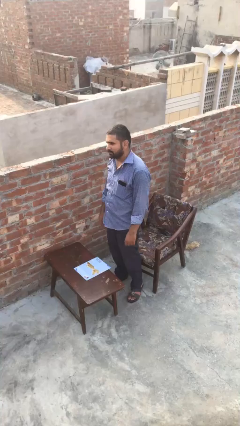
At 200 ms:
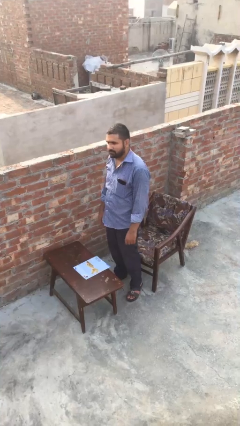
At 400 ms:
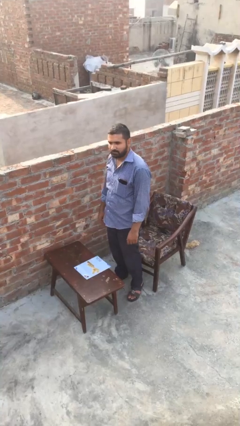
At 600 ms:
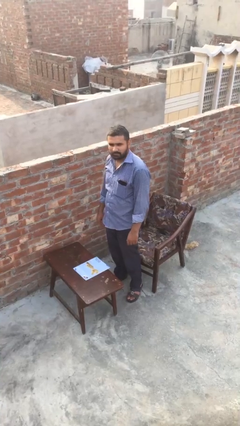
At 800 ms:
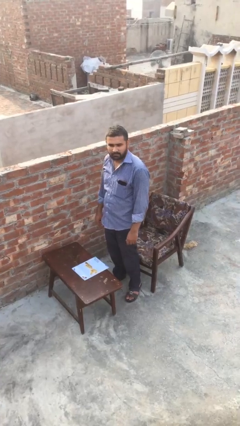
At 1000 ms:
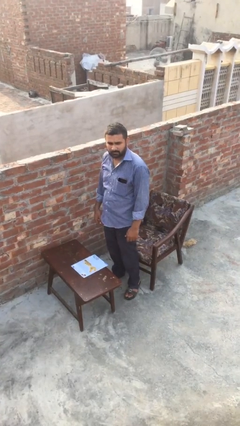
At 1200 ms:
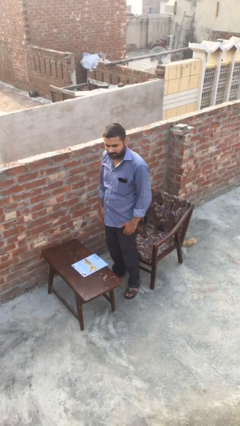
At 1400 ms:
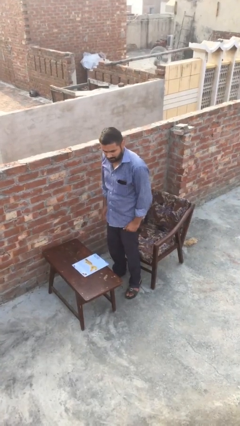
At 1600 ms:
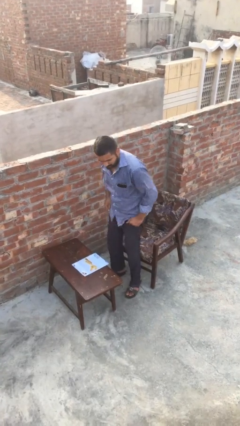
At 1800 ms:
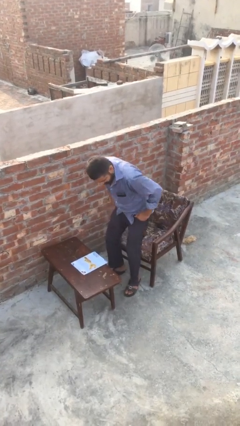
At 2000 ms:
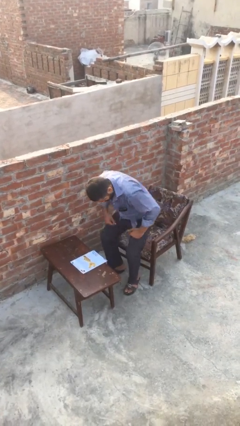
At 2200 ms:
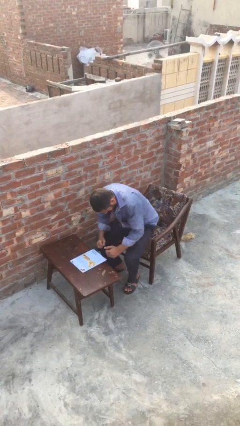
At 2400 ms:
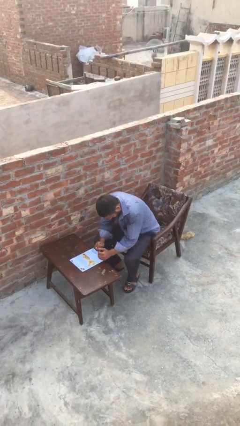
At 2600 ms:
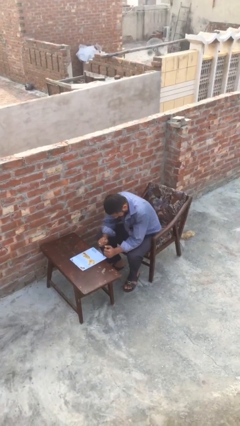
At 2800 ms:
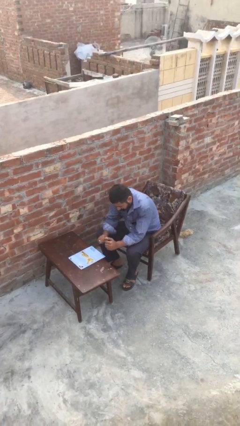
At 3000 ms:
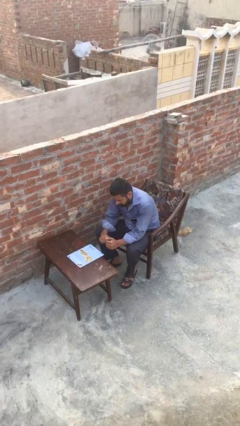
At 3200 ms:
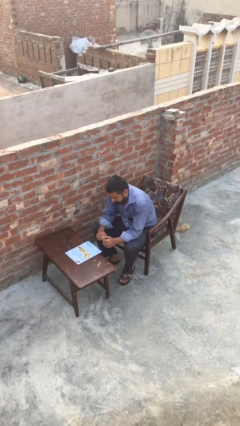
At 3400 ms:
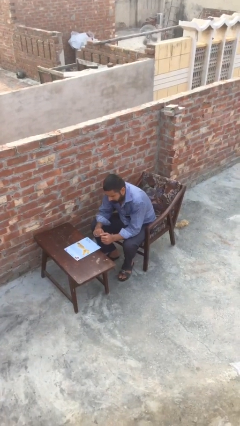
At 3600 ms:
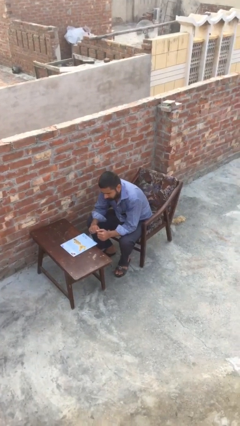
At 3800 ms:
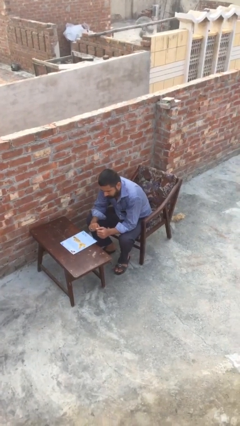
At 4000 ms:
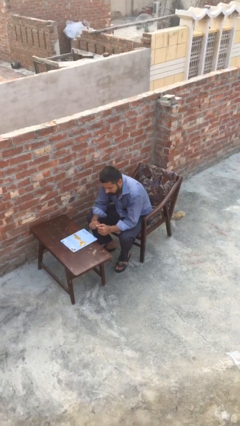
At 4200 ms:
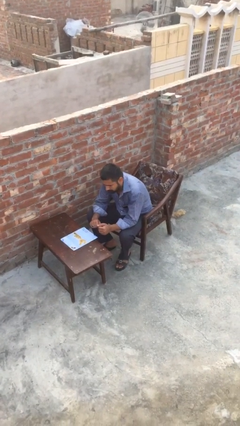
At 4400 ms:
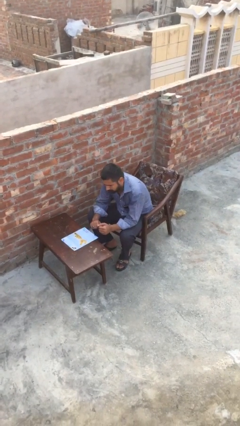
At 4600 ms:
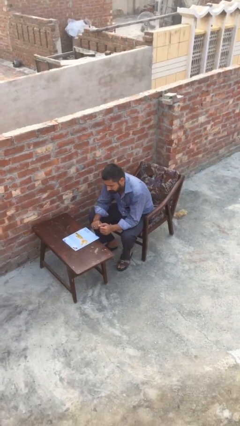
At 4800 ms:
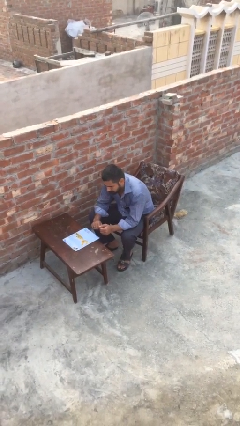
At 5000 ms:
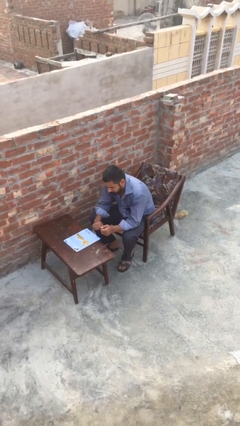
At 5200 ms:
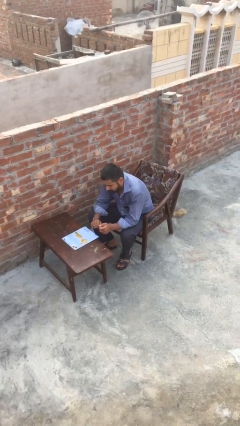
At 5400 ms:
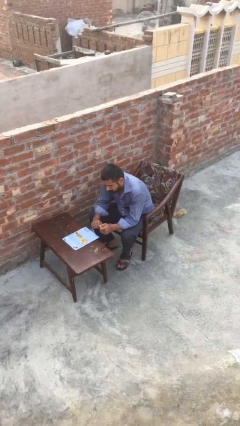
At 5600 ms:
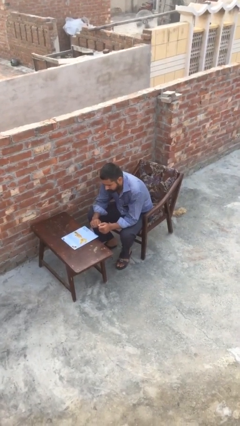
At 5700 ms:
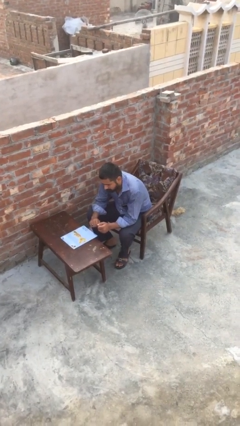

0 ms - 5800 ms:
person sits down

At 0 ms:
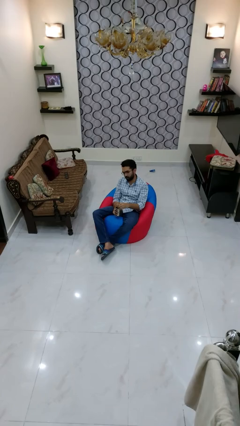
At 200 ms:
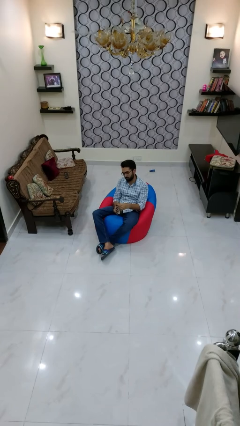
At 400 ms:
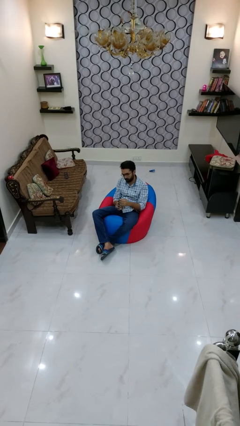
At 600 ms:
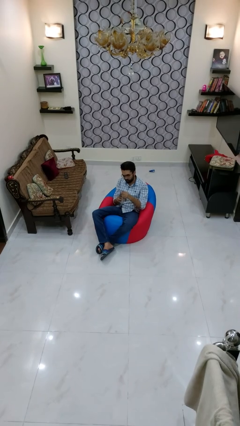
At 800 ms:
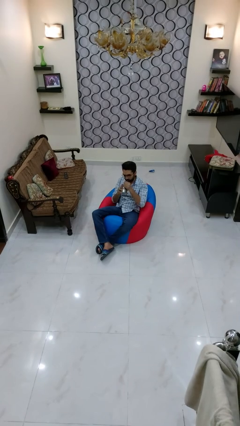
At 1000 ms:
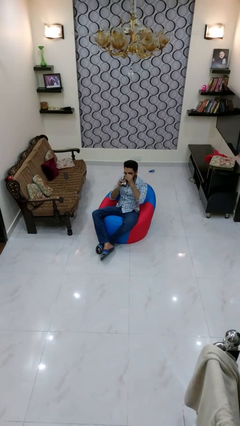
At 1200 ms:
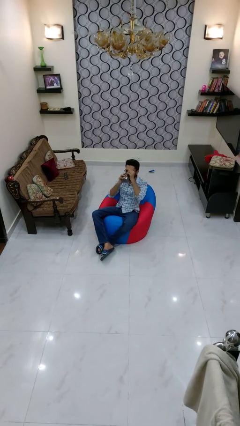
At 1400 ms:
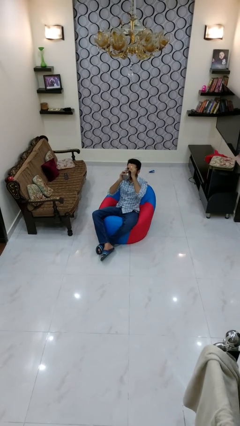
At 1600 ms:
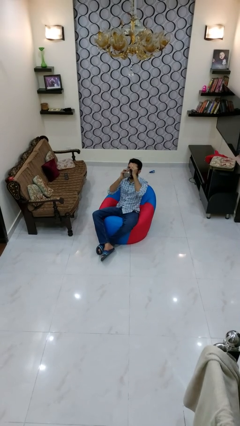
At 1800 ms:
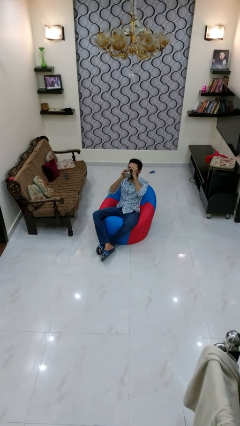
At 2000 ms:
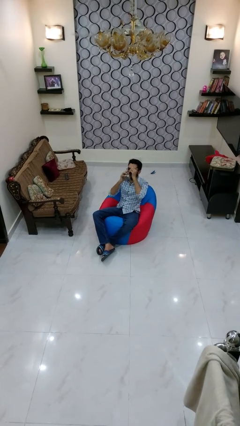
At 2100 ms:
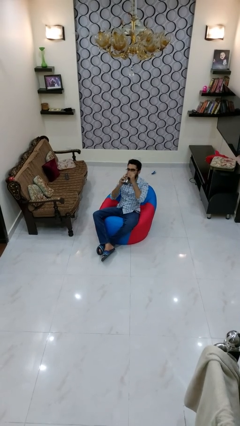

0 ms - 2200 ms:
person drinks from mug

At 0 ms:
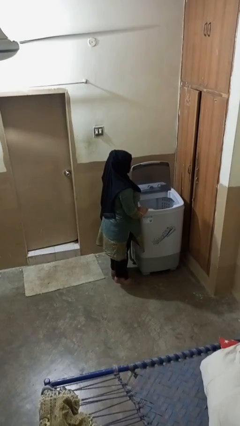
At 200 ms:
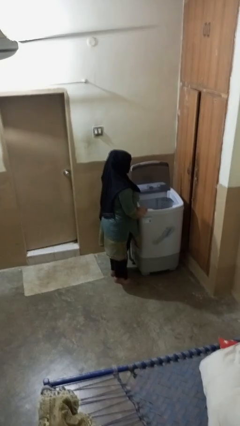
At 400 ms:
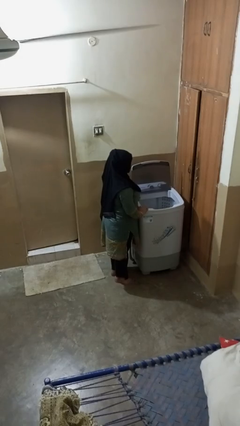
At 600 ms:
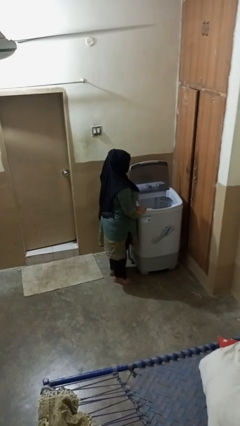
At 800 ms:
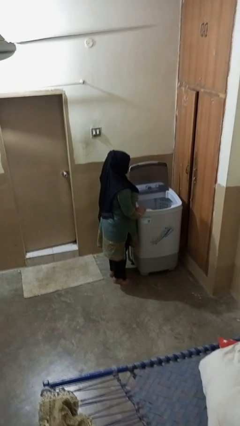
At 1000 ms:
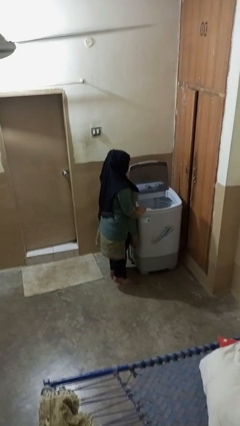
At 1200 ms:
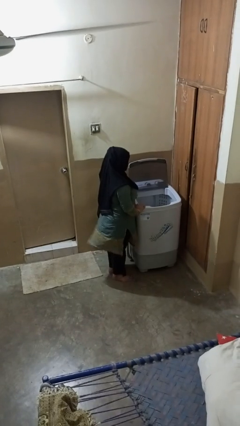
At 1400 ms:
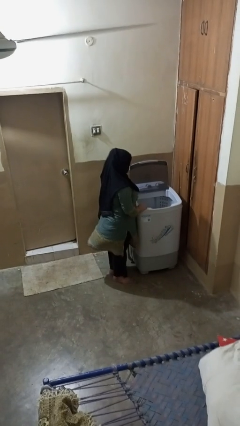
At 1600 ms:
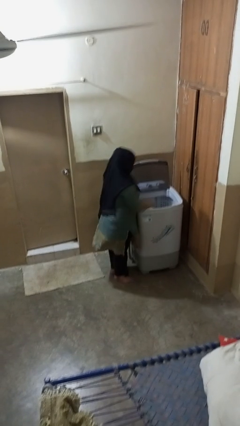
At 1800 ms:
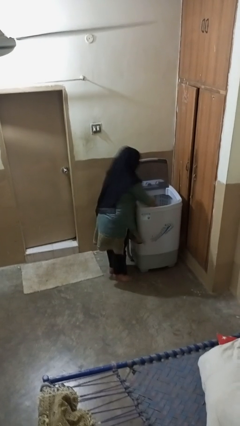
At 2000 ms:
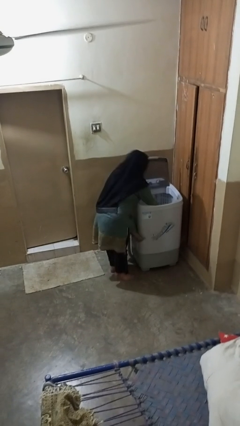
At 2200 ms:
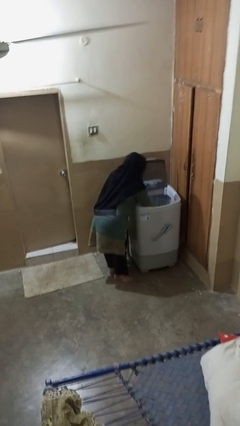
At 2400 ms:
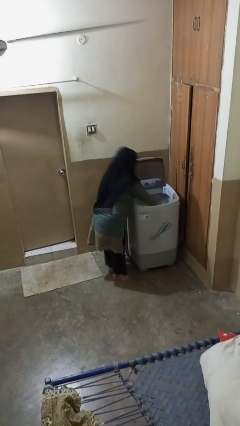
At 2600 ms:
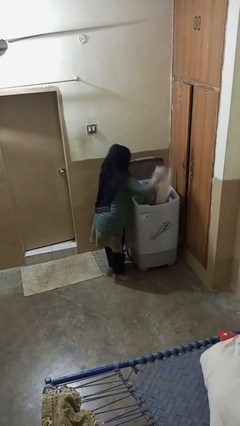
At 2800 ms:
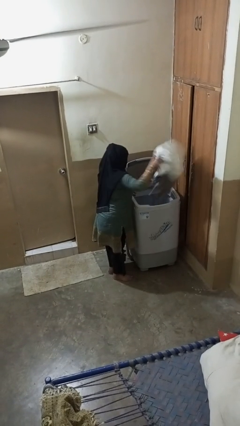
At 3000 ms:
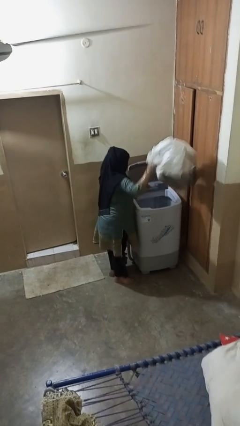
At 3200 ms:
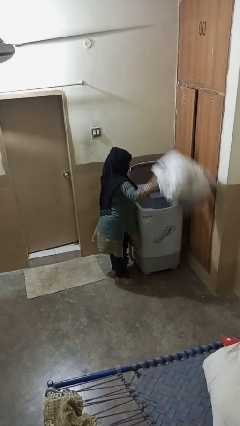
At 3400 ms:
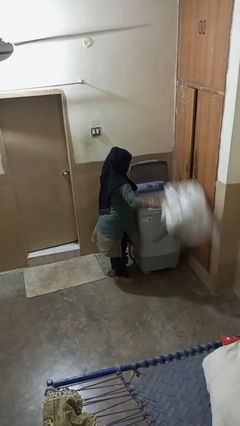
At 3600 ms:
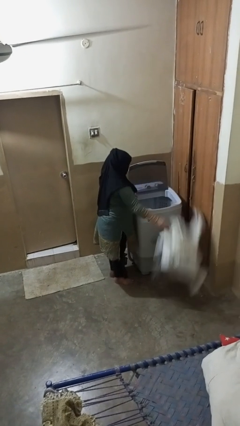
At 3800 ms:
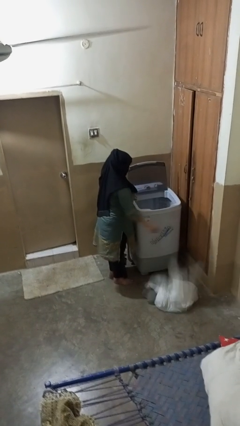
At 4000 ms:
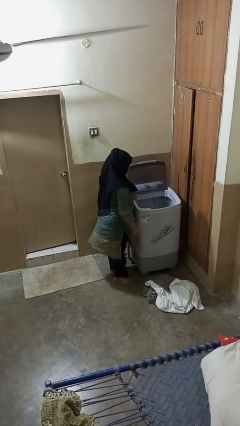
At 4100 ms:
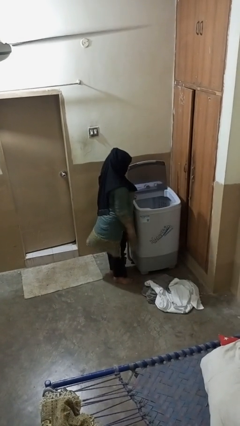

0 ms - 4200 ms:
person unloads clotheswasher

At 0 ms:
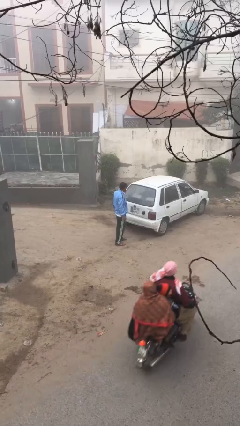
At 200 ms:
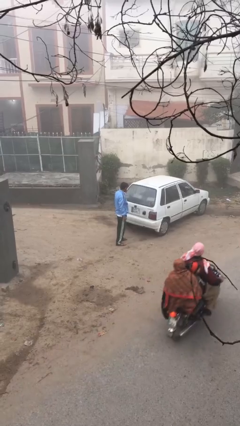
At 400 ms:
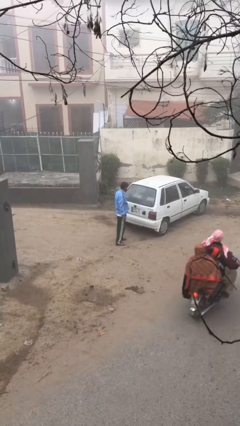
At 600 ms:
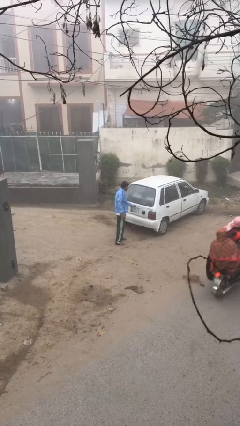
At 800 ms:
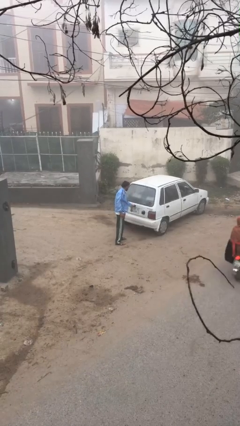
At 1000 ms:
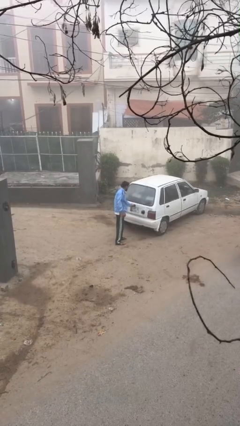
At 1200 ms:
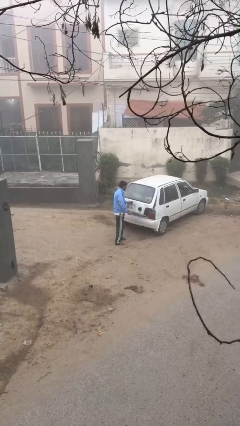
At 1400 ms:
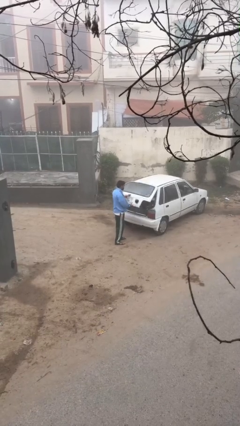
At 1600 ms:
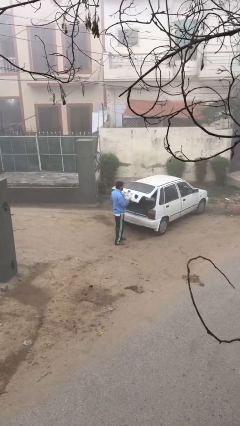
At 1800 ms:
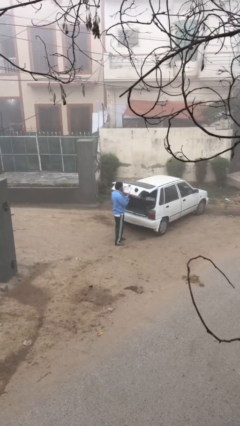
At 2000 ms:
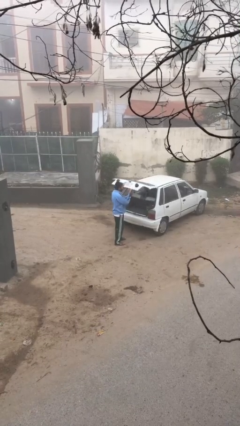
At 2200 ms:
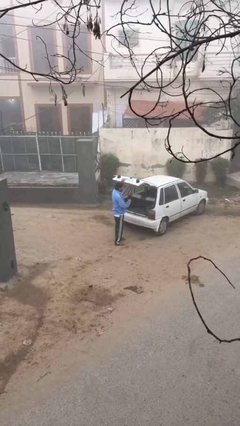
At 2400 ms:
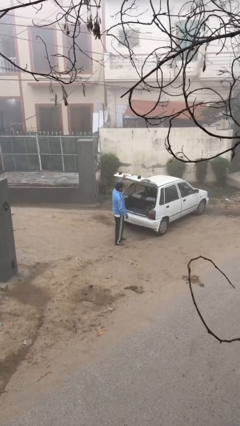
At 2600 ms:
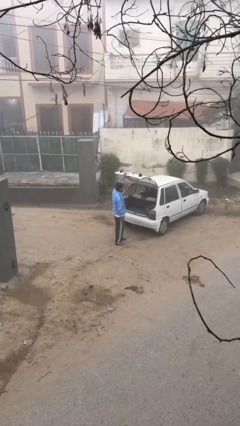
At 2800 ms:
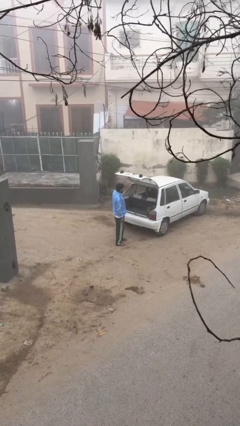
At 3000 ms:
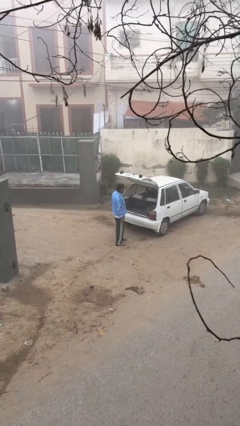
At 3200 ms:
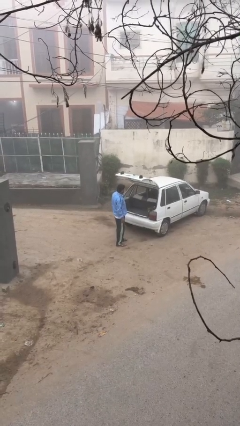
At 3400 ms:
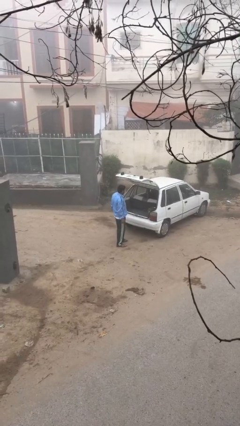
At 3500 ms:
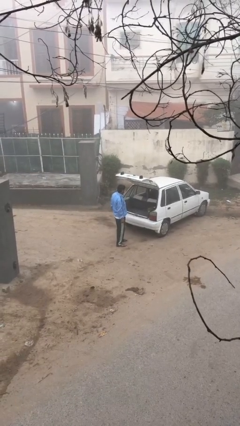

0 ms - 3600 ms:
person opens car trunk

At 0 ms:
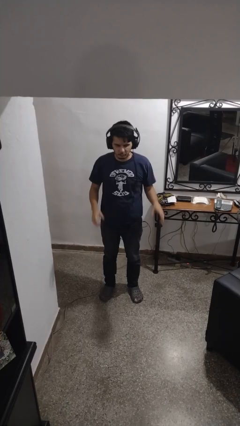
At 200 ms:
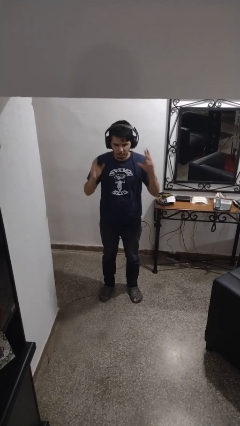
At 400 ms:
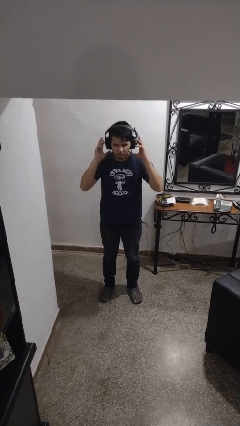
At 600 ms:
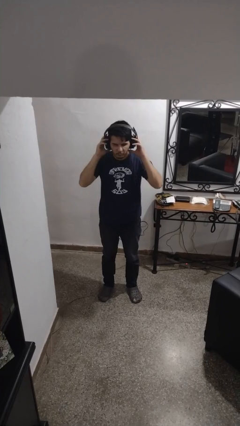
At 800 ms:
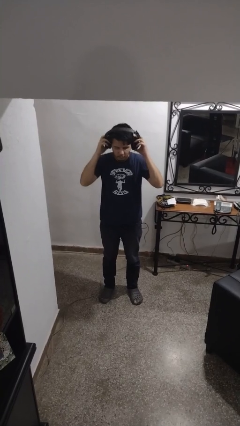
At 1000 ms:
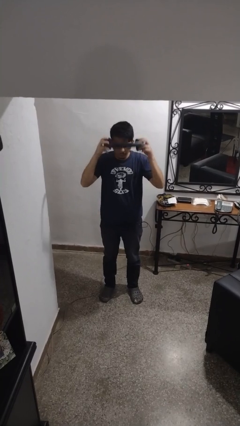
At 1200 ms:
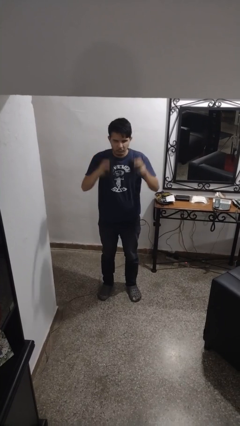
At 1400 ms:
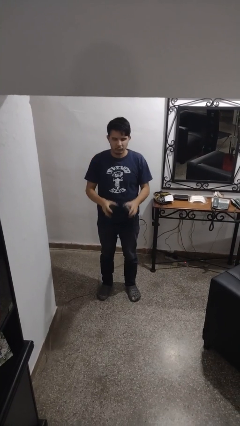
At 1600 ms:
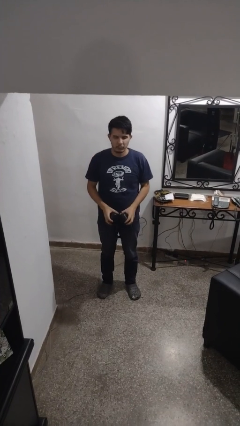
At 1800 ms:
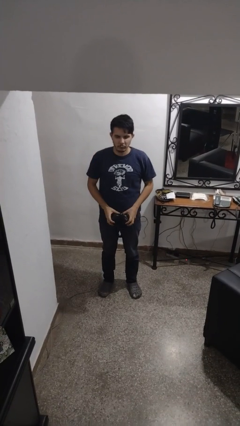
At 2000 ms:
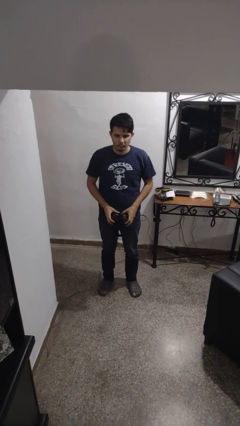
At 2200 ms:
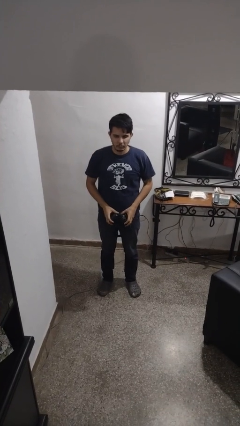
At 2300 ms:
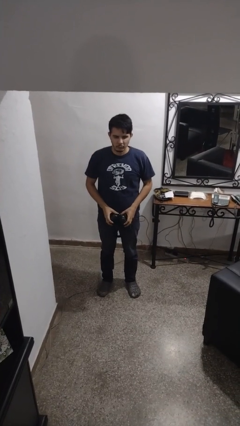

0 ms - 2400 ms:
person takes off headphones
